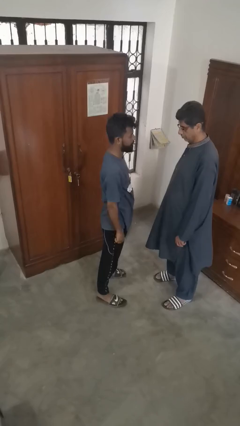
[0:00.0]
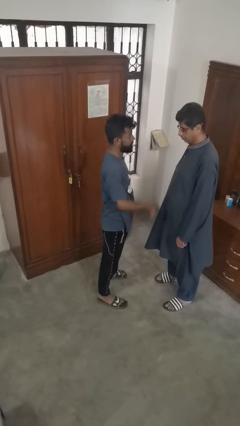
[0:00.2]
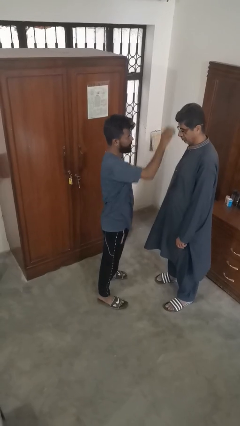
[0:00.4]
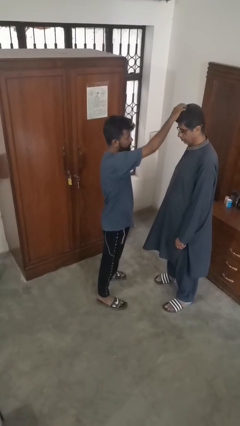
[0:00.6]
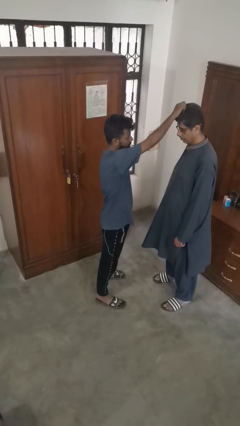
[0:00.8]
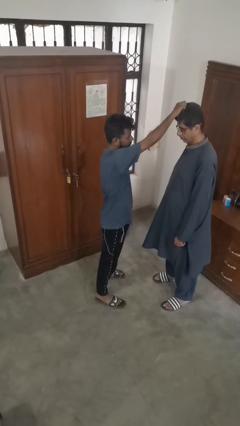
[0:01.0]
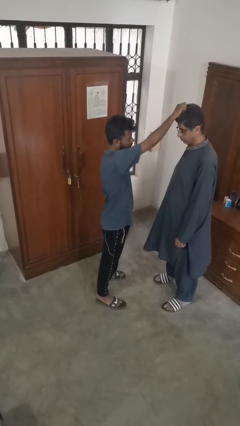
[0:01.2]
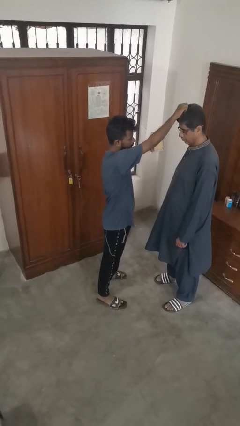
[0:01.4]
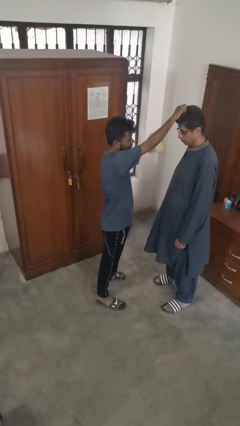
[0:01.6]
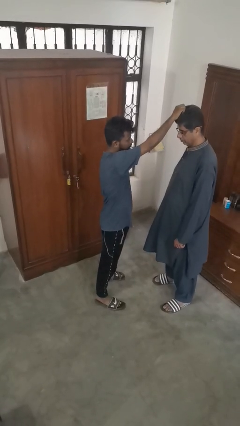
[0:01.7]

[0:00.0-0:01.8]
person grabs person by hair

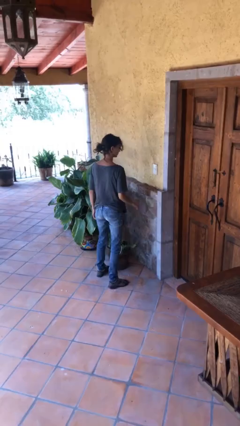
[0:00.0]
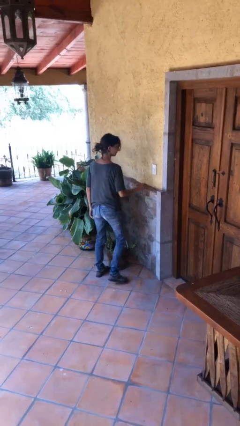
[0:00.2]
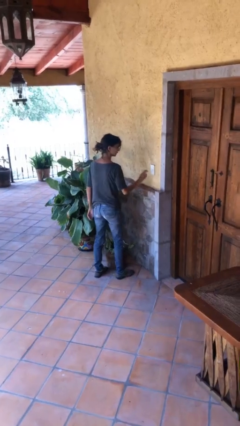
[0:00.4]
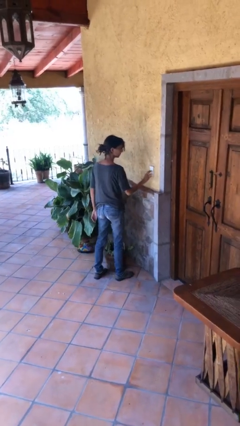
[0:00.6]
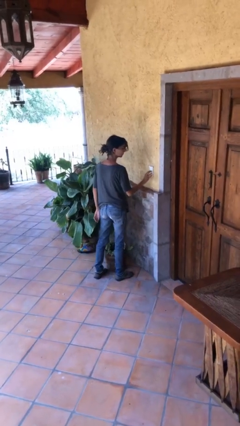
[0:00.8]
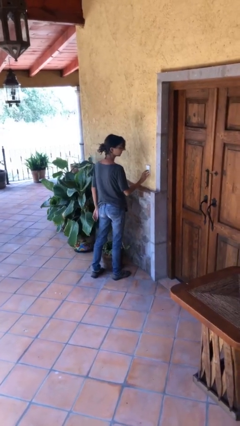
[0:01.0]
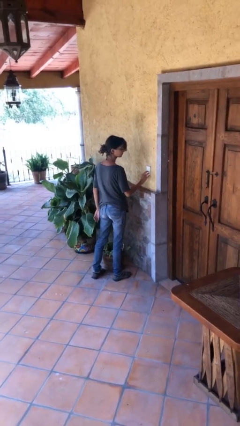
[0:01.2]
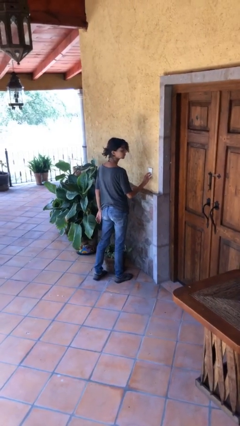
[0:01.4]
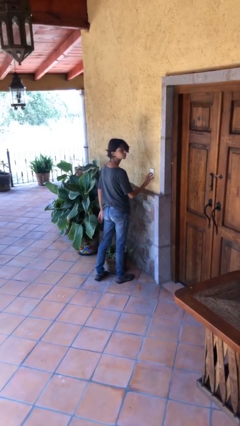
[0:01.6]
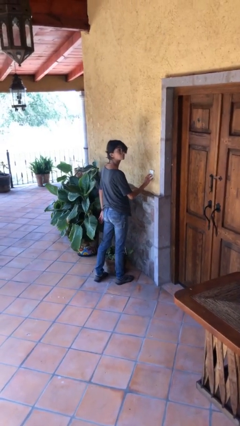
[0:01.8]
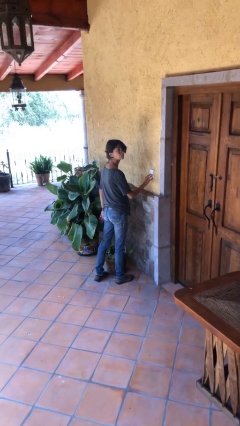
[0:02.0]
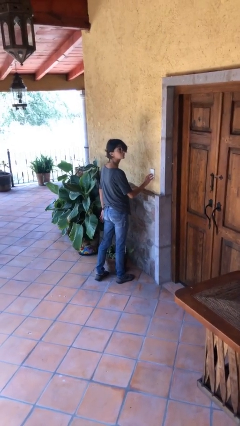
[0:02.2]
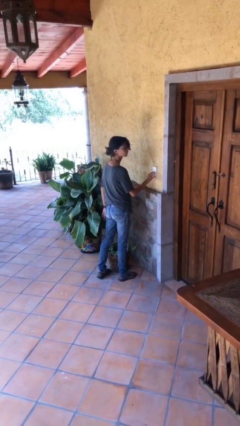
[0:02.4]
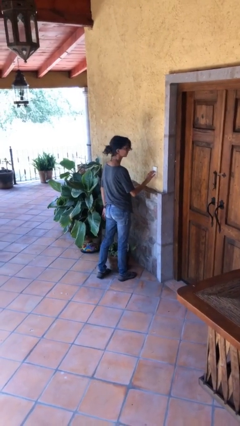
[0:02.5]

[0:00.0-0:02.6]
person adjusts thermostat

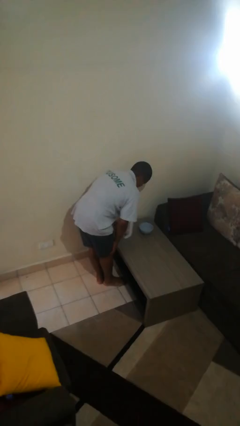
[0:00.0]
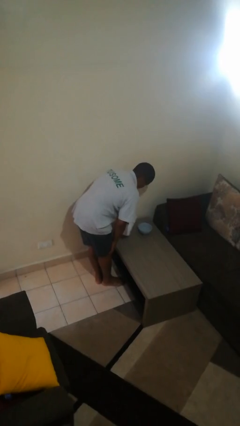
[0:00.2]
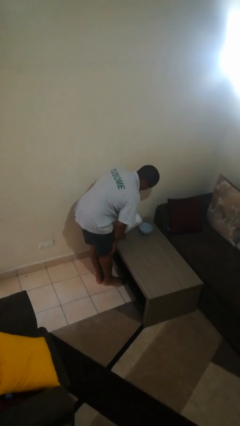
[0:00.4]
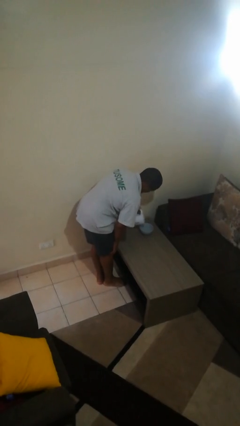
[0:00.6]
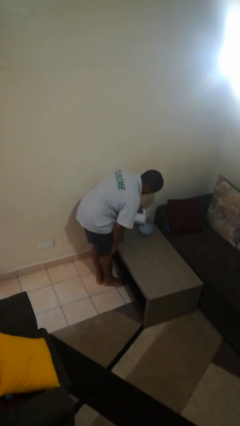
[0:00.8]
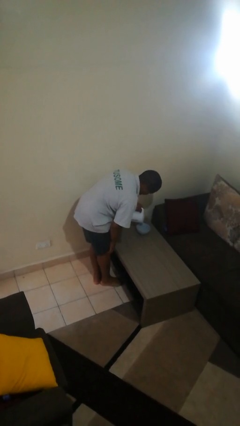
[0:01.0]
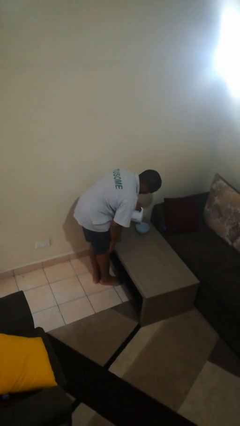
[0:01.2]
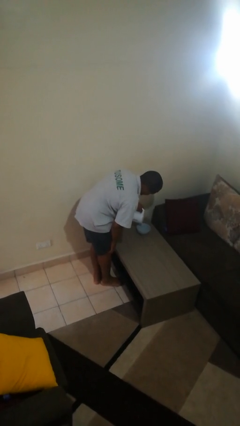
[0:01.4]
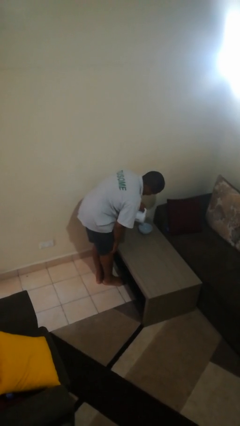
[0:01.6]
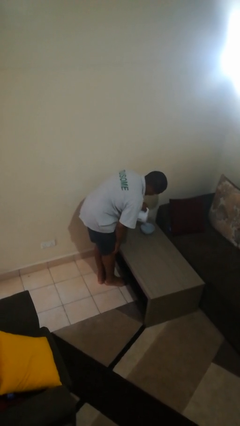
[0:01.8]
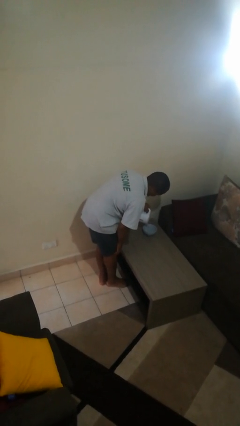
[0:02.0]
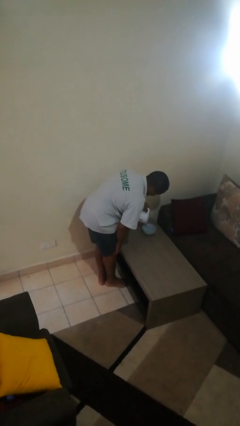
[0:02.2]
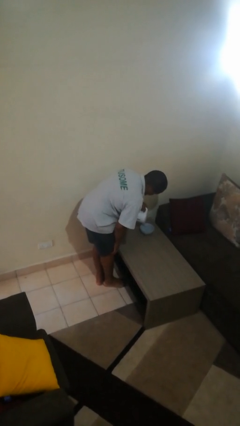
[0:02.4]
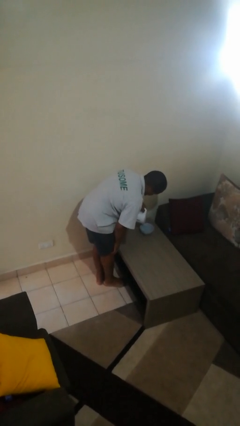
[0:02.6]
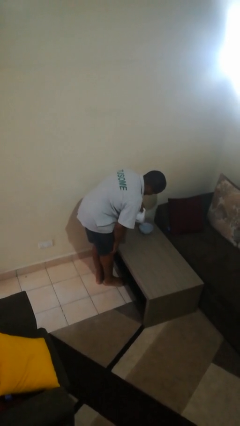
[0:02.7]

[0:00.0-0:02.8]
person pours into bowl

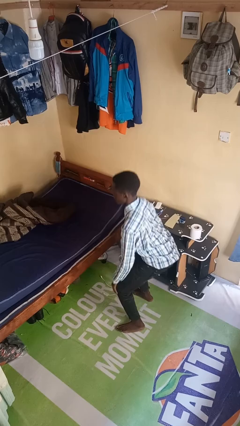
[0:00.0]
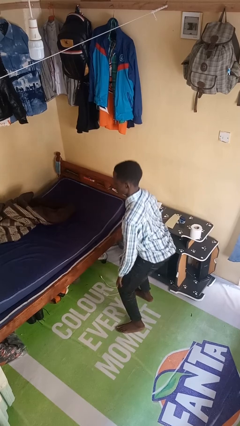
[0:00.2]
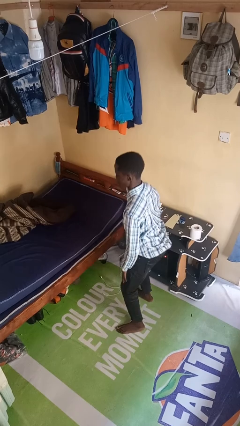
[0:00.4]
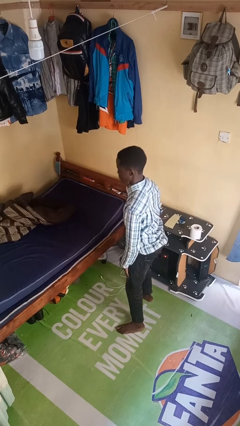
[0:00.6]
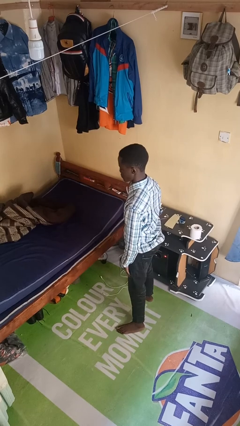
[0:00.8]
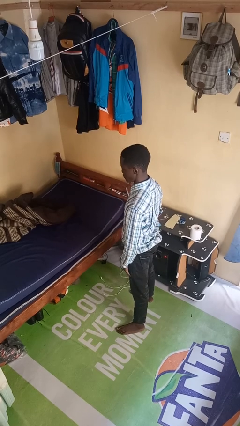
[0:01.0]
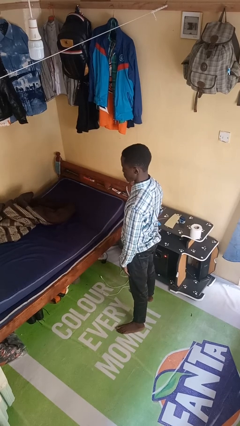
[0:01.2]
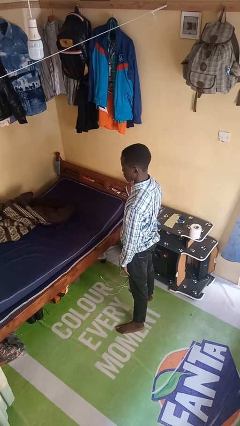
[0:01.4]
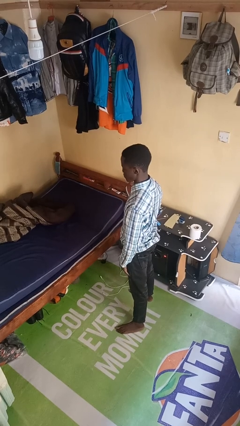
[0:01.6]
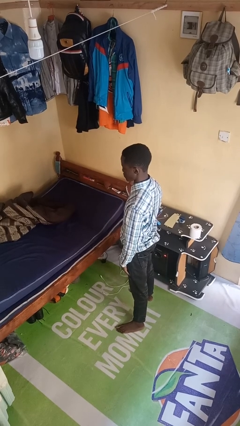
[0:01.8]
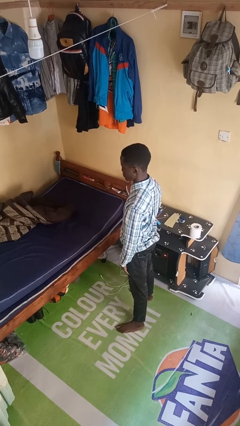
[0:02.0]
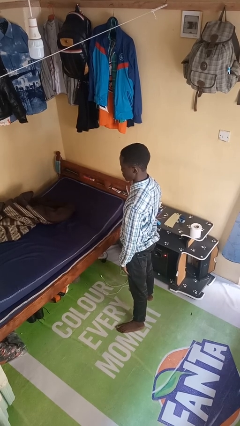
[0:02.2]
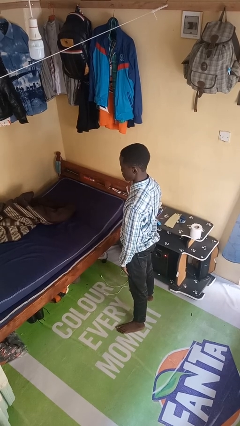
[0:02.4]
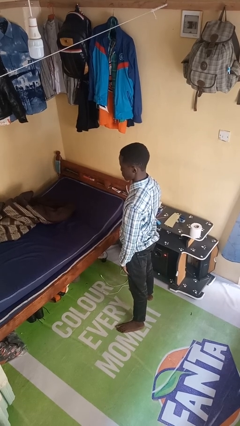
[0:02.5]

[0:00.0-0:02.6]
person stands up

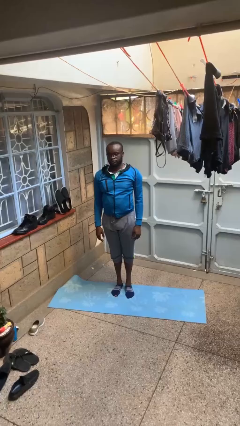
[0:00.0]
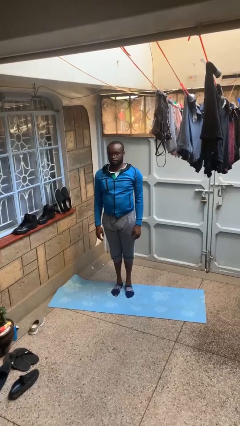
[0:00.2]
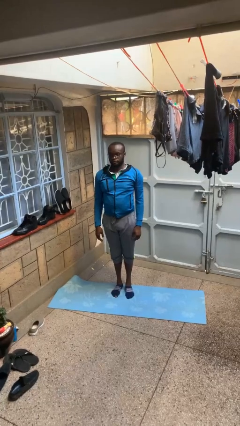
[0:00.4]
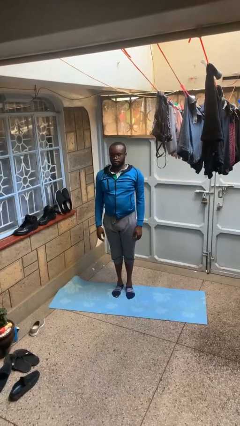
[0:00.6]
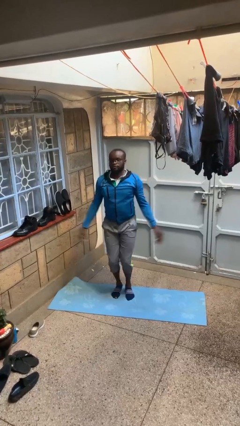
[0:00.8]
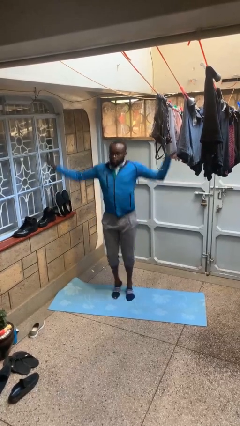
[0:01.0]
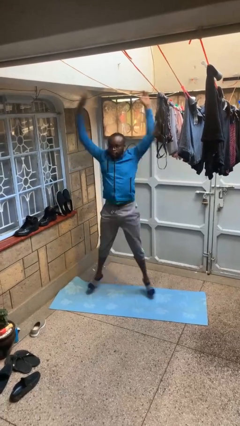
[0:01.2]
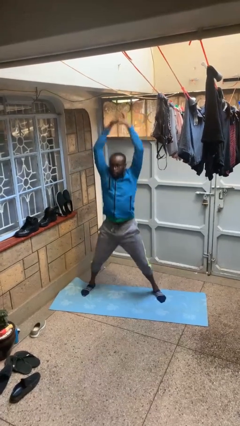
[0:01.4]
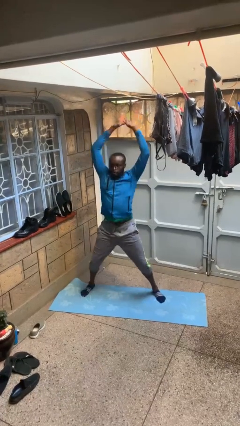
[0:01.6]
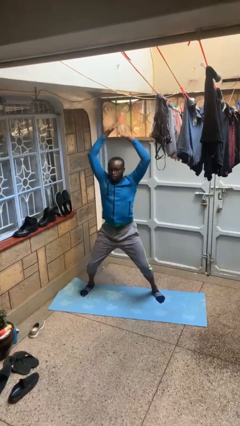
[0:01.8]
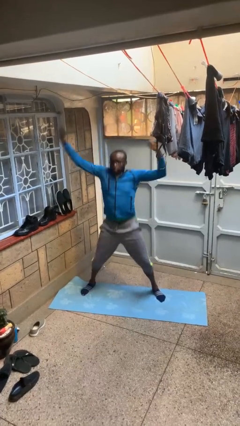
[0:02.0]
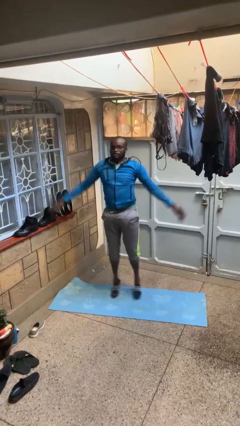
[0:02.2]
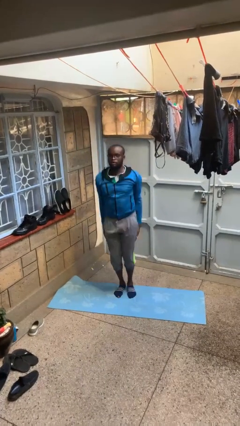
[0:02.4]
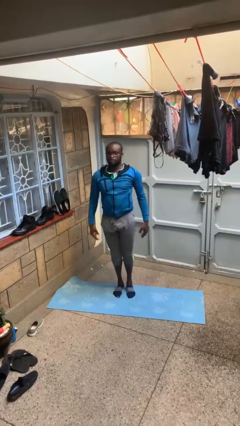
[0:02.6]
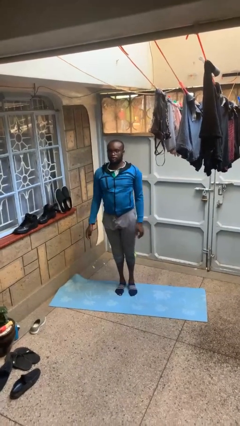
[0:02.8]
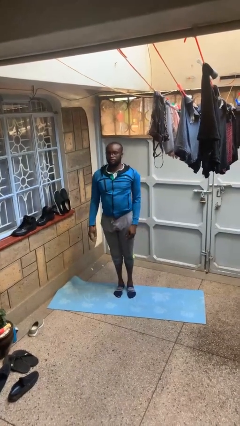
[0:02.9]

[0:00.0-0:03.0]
person exercises with jumping jacks

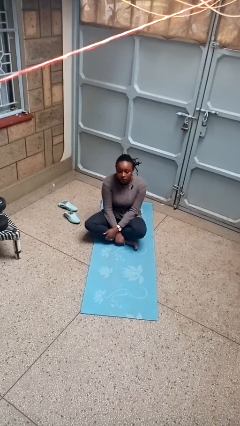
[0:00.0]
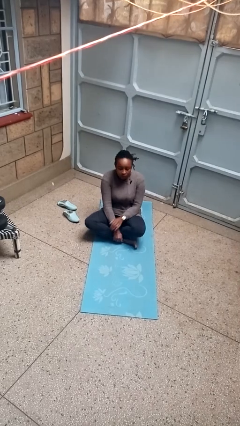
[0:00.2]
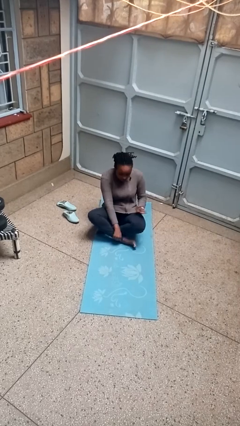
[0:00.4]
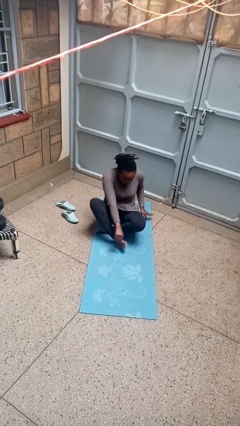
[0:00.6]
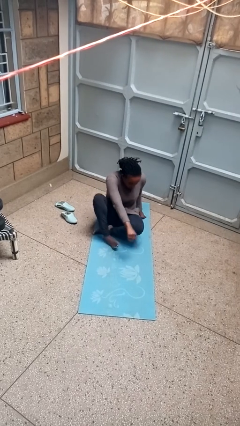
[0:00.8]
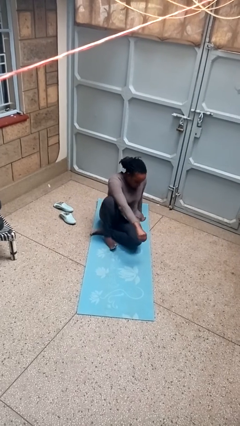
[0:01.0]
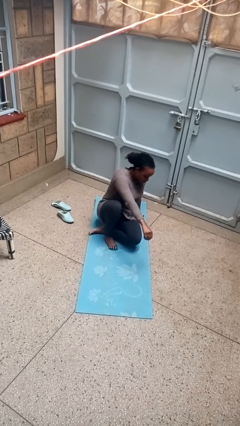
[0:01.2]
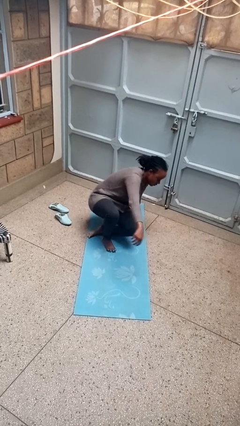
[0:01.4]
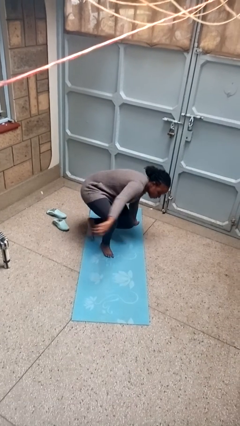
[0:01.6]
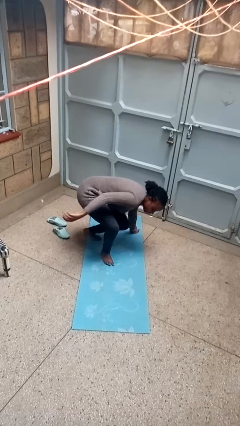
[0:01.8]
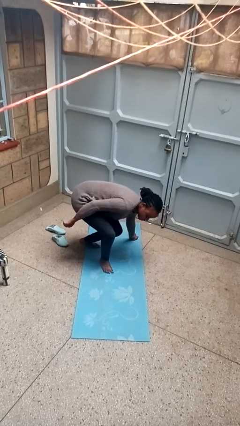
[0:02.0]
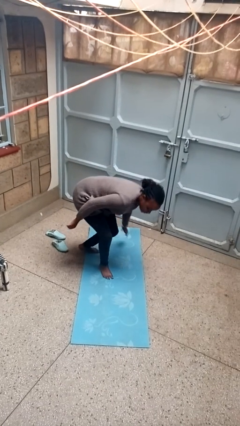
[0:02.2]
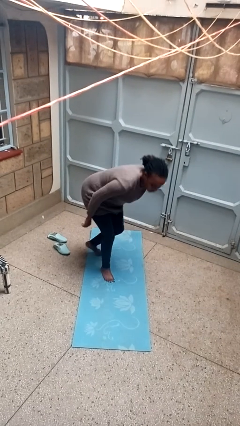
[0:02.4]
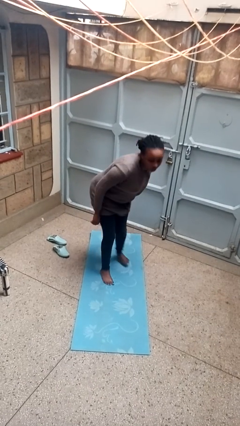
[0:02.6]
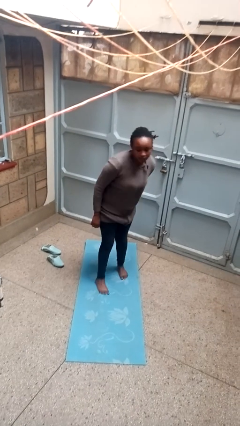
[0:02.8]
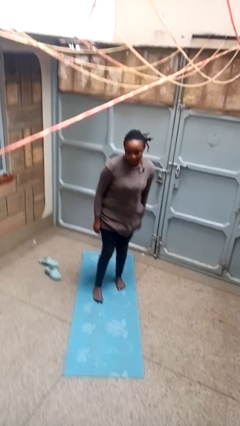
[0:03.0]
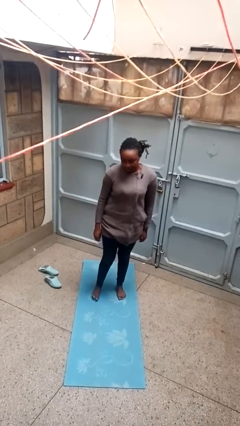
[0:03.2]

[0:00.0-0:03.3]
person stands up from floor

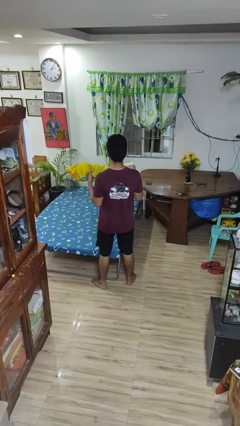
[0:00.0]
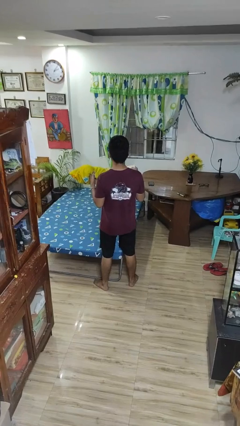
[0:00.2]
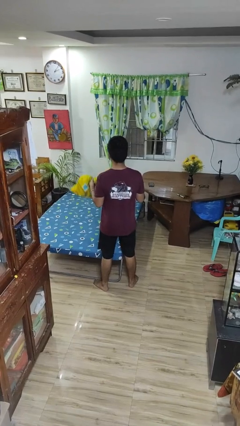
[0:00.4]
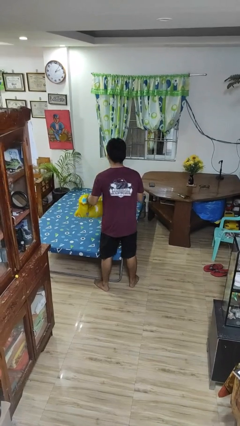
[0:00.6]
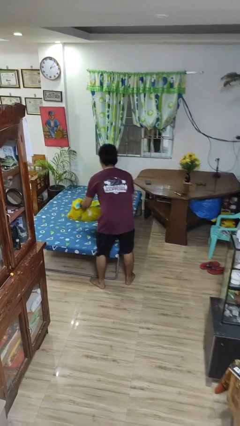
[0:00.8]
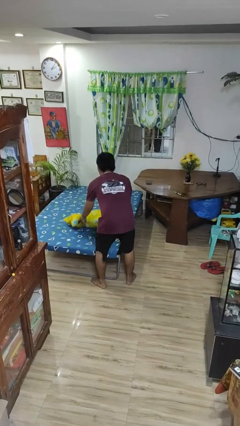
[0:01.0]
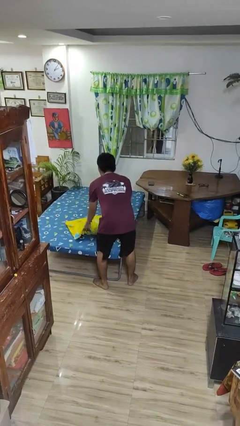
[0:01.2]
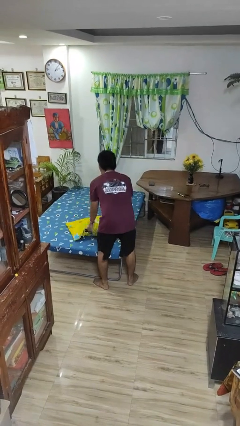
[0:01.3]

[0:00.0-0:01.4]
person puts down object on bed
